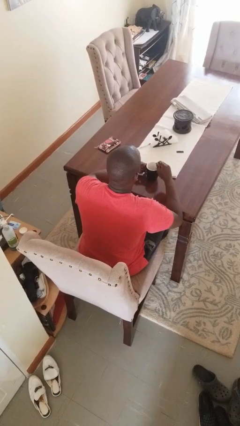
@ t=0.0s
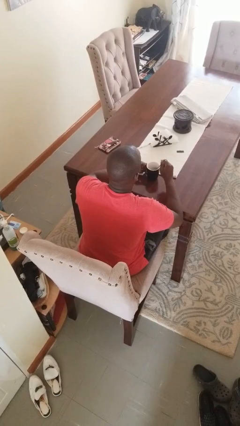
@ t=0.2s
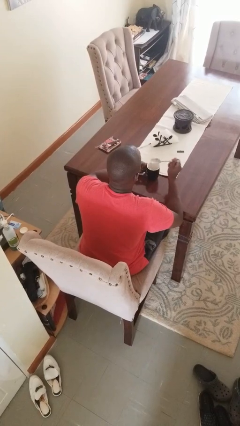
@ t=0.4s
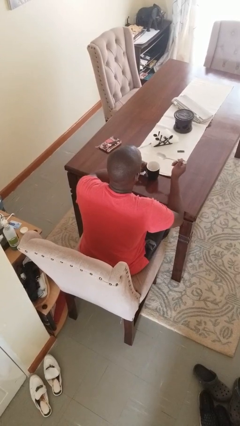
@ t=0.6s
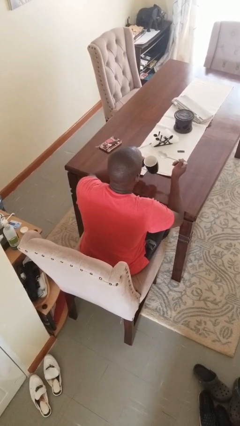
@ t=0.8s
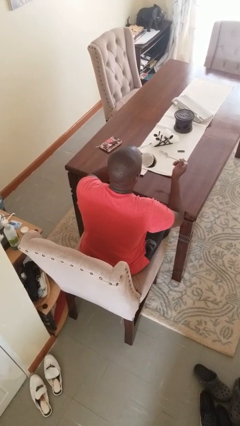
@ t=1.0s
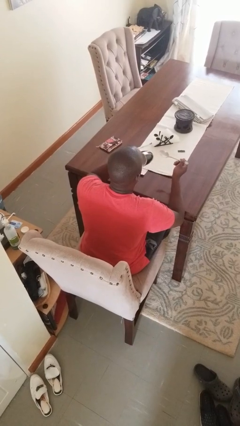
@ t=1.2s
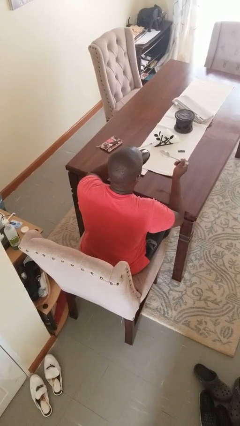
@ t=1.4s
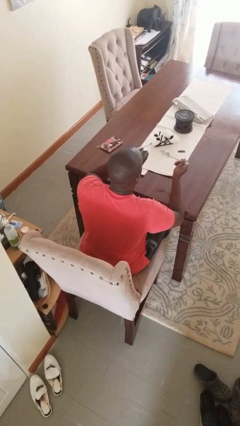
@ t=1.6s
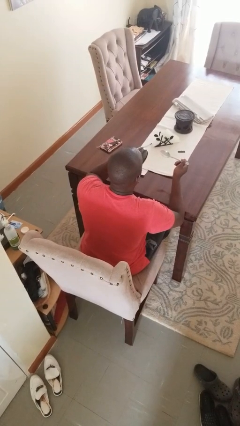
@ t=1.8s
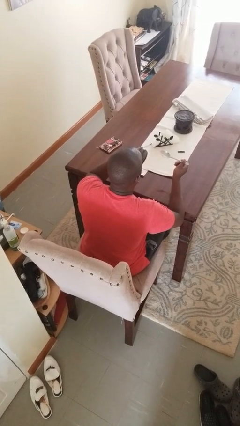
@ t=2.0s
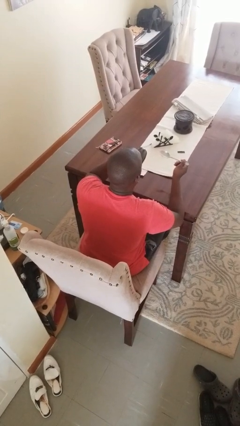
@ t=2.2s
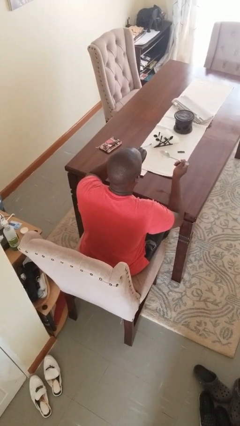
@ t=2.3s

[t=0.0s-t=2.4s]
person drinks from mug

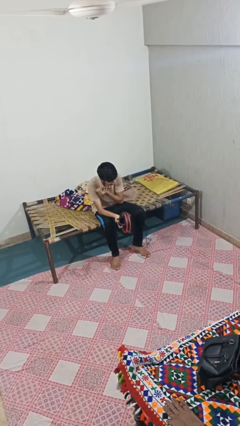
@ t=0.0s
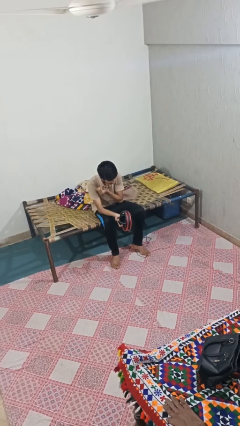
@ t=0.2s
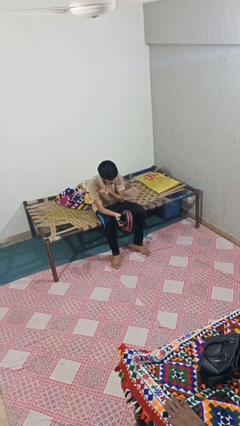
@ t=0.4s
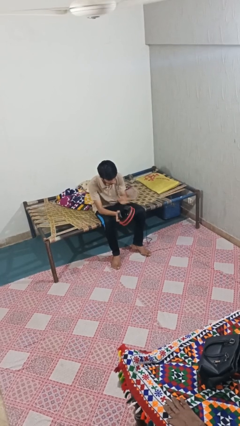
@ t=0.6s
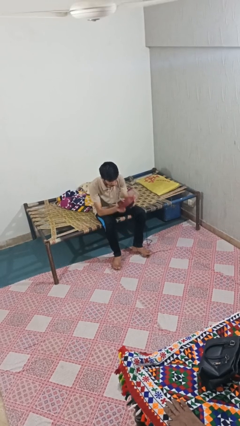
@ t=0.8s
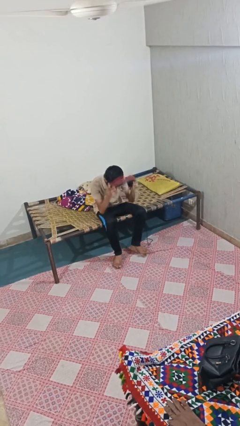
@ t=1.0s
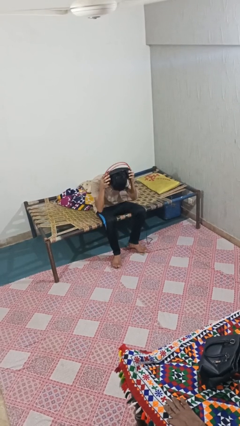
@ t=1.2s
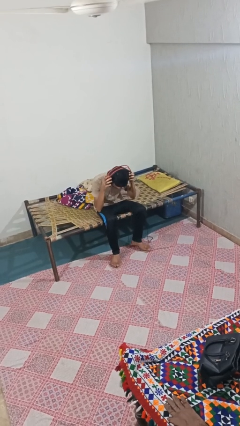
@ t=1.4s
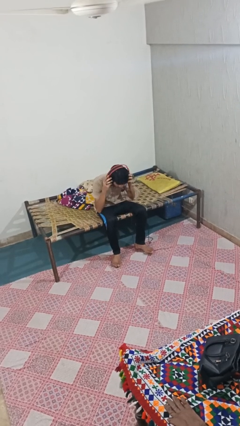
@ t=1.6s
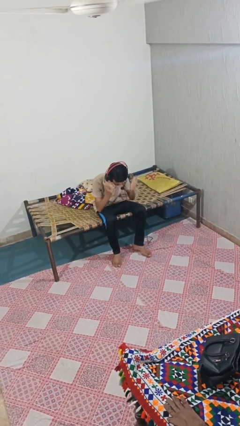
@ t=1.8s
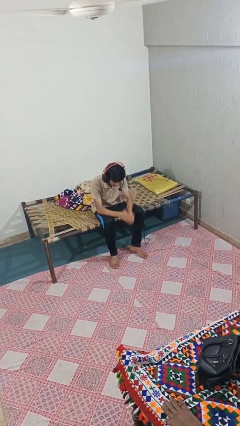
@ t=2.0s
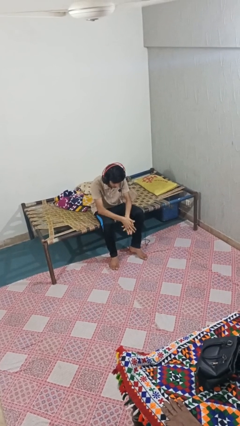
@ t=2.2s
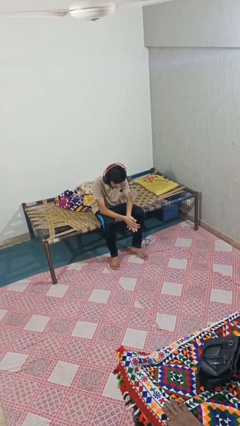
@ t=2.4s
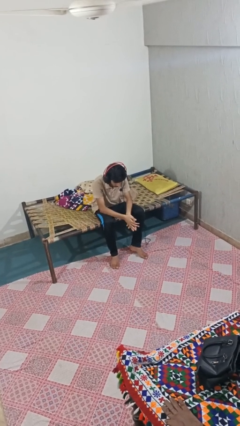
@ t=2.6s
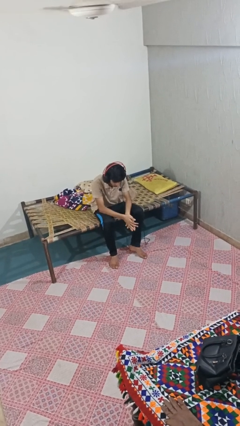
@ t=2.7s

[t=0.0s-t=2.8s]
person puts on headphones

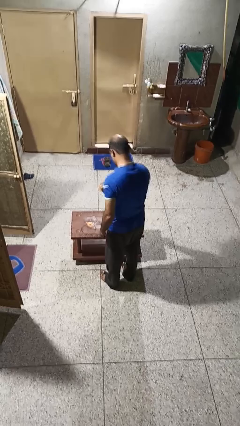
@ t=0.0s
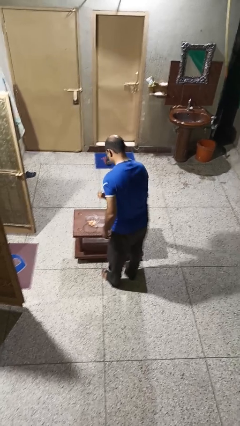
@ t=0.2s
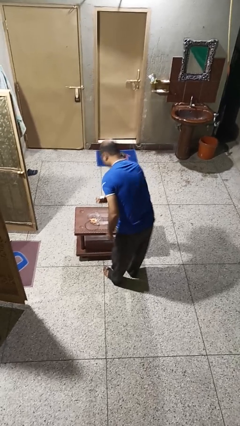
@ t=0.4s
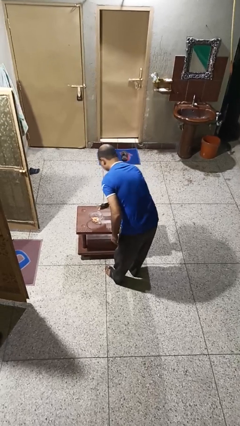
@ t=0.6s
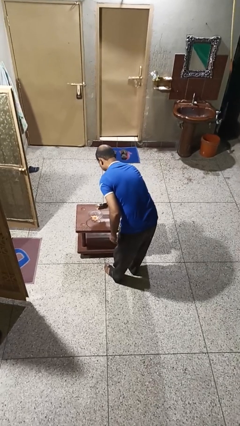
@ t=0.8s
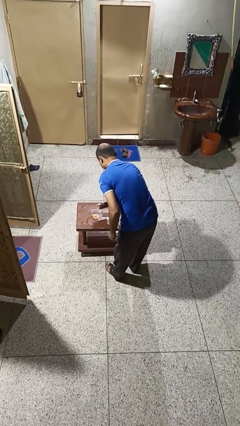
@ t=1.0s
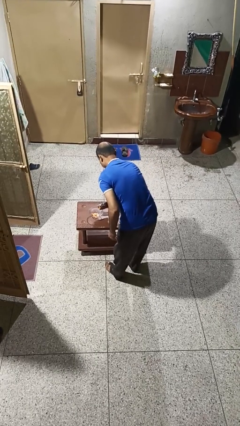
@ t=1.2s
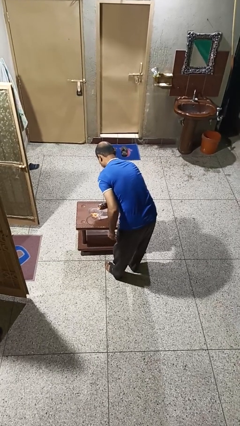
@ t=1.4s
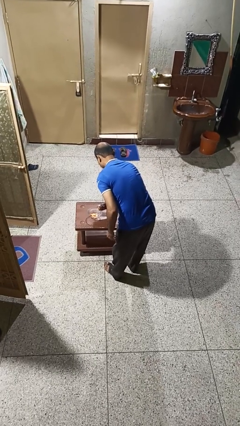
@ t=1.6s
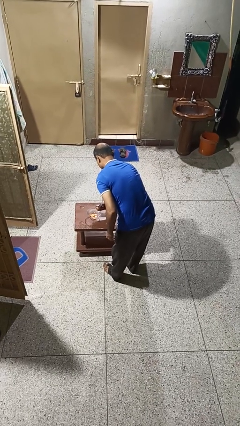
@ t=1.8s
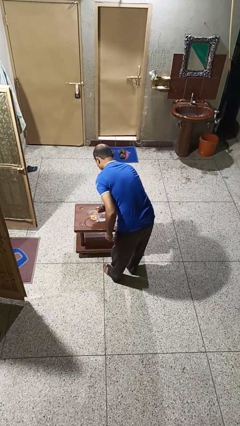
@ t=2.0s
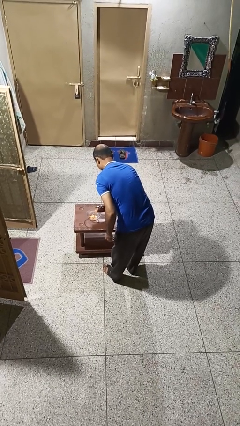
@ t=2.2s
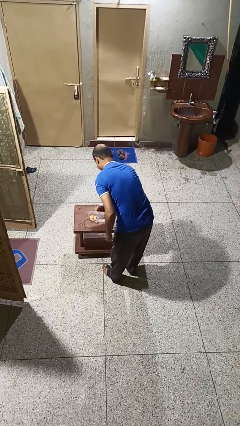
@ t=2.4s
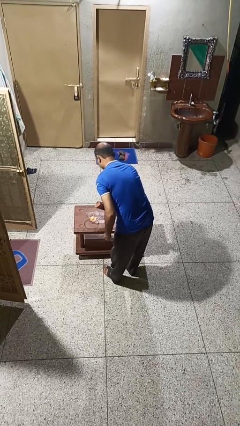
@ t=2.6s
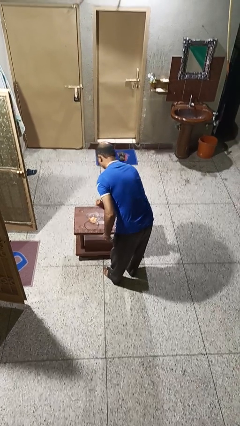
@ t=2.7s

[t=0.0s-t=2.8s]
person pours into bowl

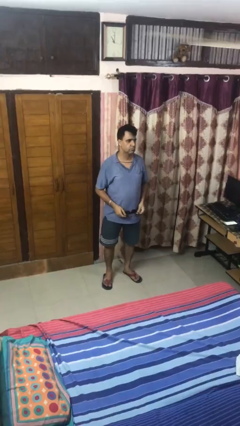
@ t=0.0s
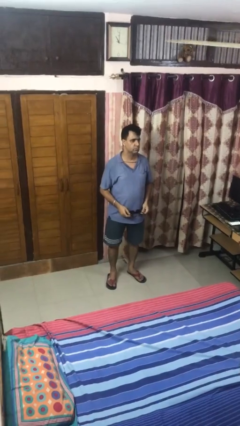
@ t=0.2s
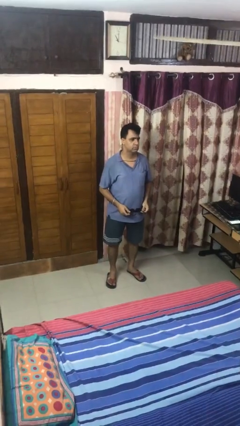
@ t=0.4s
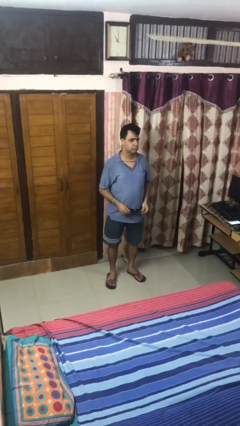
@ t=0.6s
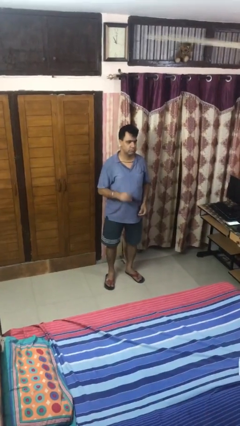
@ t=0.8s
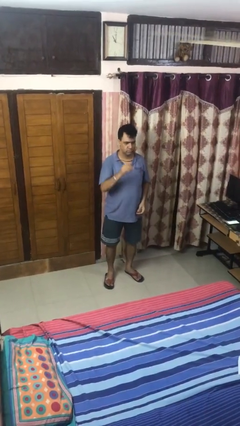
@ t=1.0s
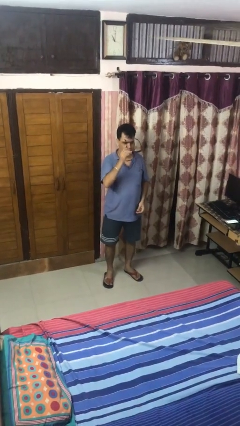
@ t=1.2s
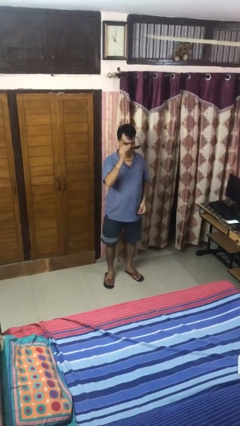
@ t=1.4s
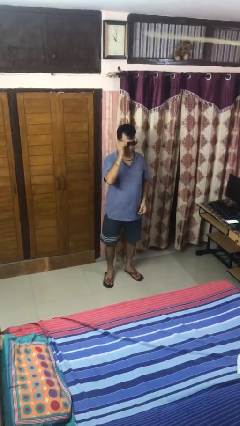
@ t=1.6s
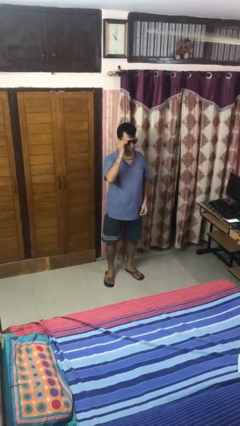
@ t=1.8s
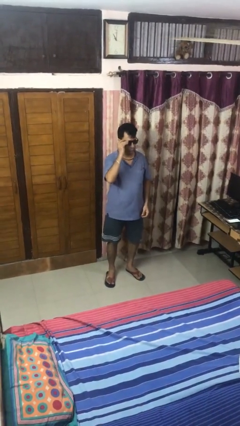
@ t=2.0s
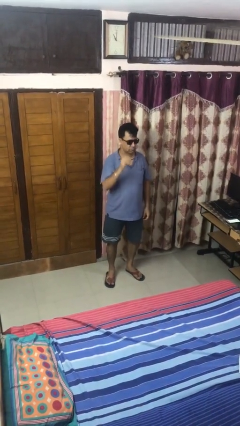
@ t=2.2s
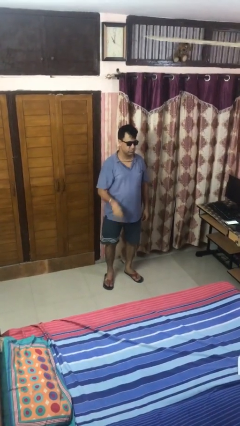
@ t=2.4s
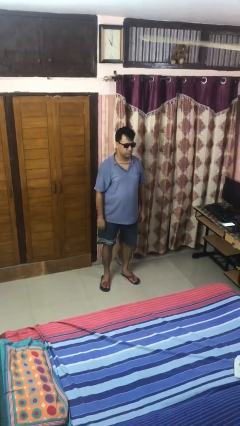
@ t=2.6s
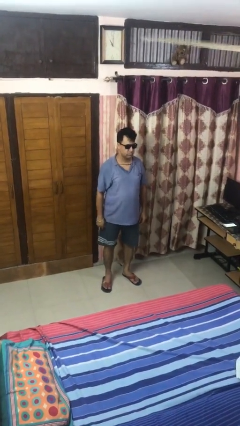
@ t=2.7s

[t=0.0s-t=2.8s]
person puts on sunglasses

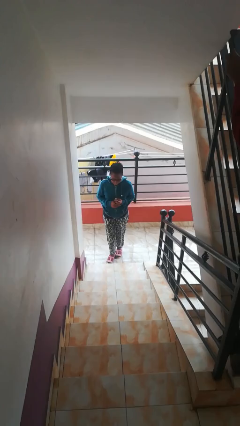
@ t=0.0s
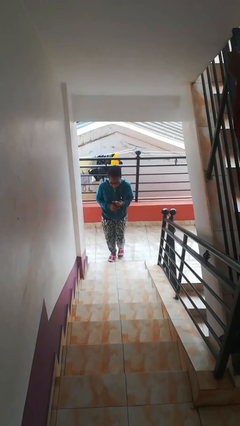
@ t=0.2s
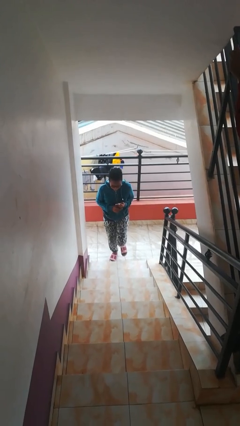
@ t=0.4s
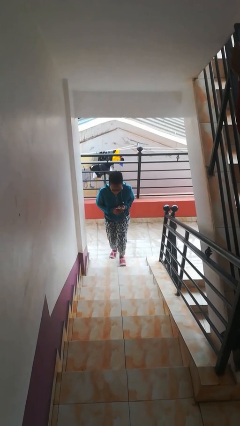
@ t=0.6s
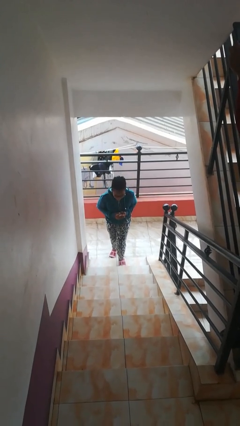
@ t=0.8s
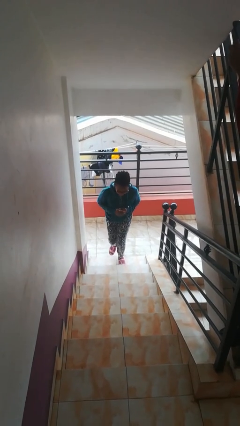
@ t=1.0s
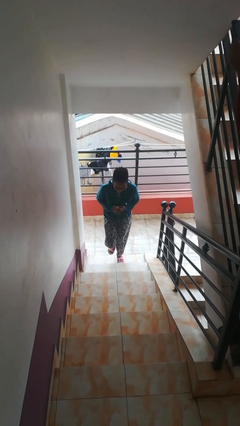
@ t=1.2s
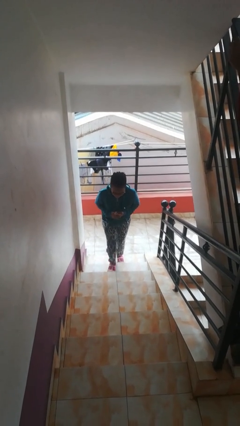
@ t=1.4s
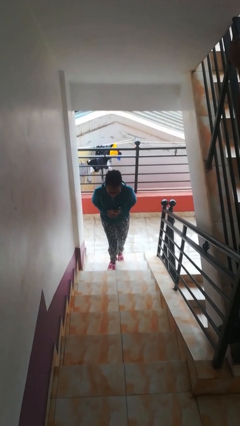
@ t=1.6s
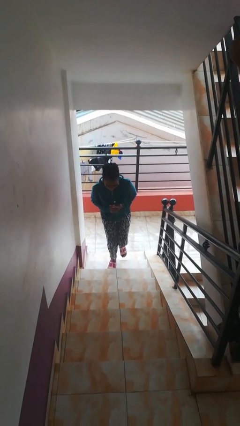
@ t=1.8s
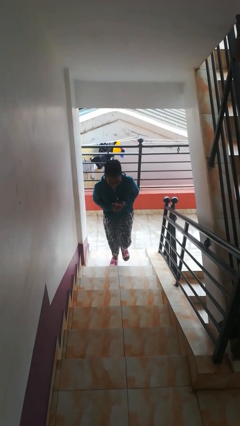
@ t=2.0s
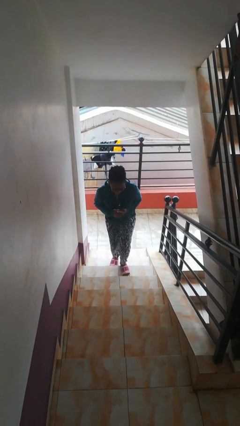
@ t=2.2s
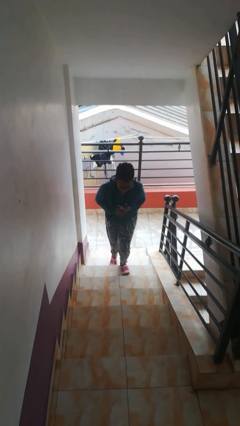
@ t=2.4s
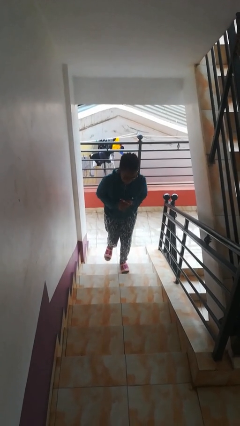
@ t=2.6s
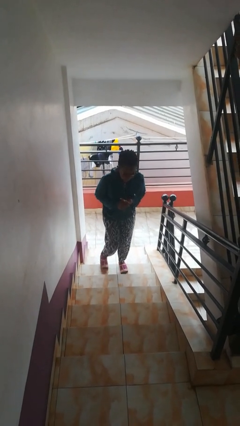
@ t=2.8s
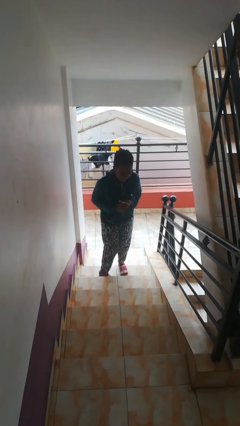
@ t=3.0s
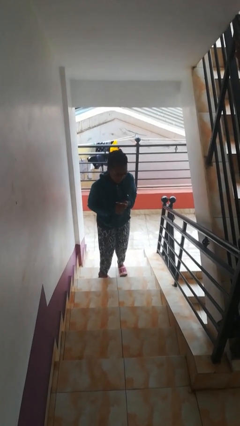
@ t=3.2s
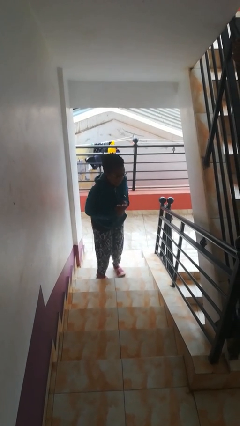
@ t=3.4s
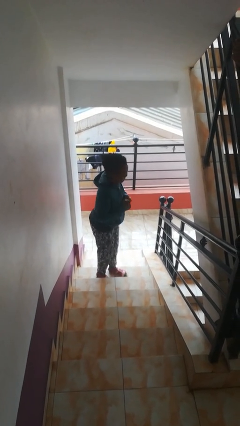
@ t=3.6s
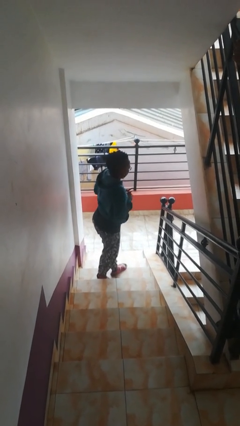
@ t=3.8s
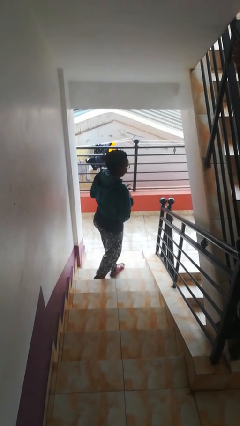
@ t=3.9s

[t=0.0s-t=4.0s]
person climbs up stairs

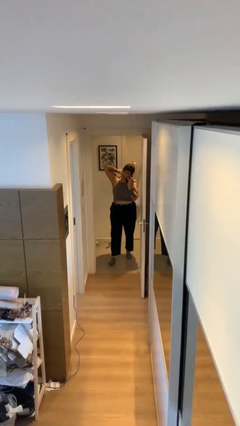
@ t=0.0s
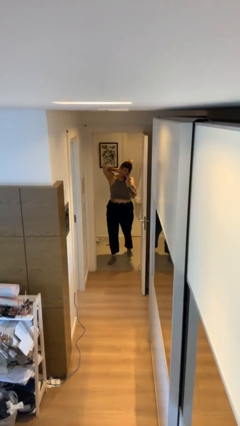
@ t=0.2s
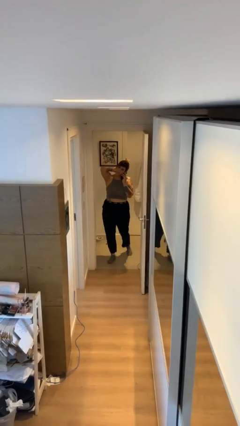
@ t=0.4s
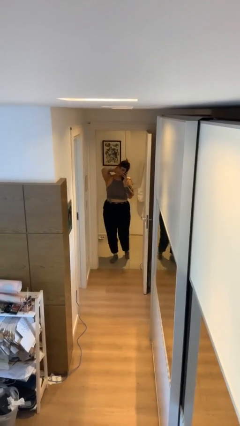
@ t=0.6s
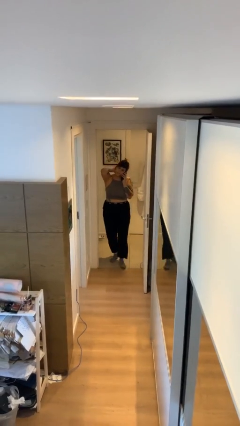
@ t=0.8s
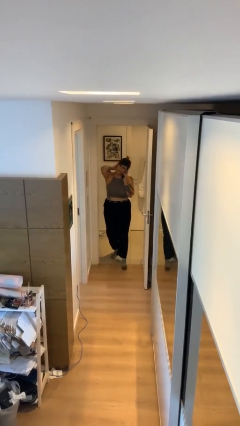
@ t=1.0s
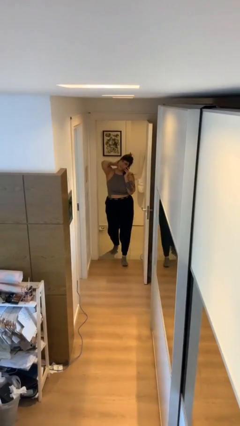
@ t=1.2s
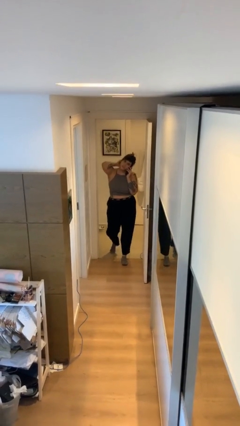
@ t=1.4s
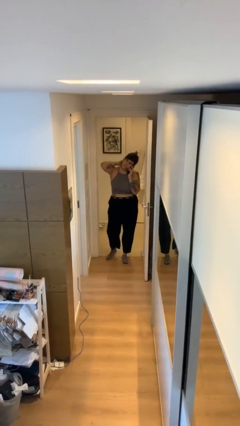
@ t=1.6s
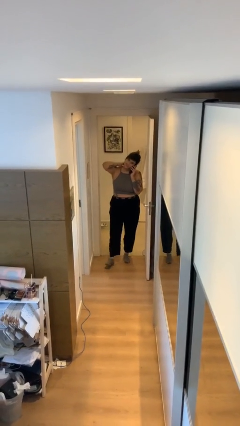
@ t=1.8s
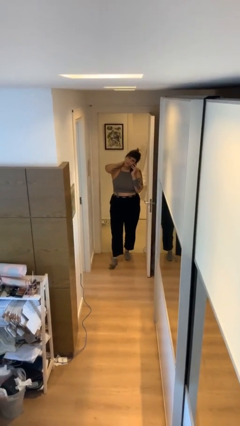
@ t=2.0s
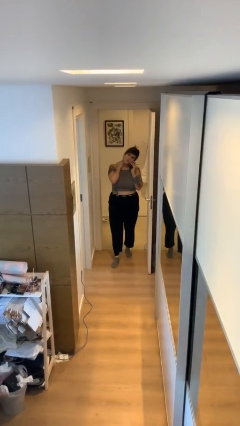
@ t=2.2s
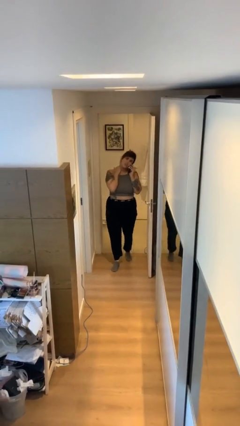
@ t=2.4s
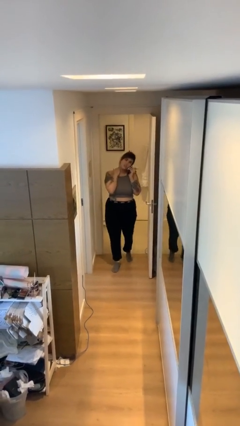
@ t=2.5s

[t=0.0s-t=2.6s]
person enters scene through structure
